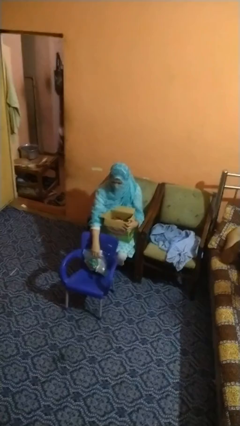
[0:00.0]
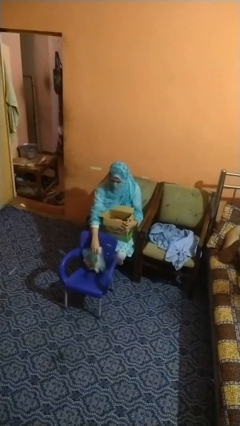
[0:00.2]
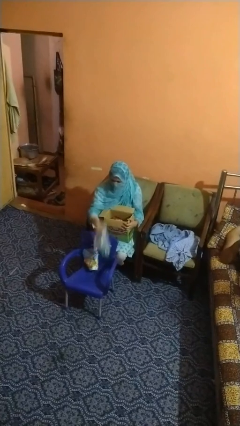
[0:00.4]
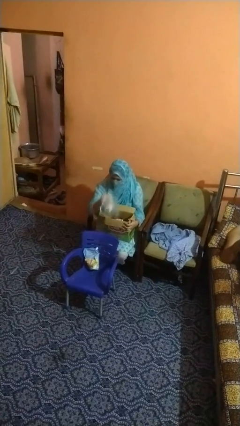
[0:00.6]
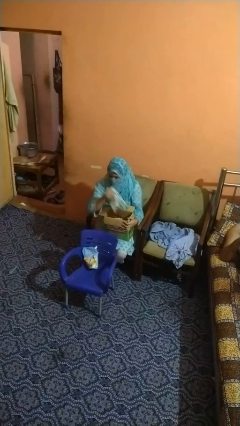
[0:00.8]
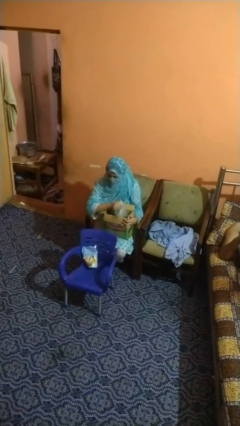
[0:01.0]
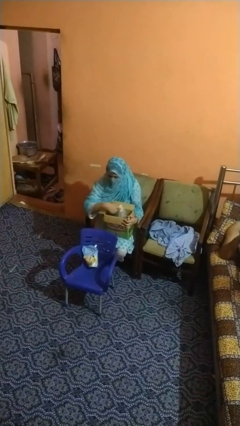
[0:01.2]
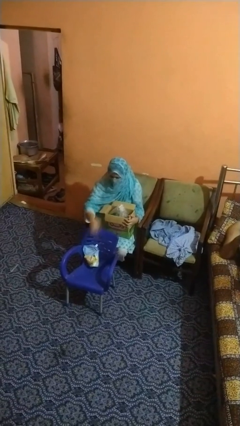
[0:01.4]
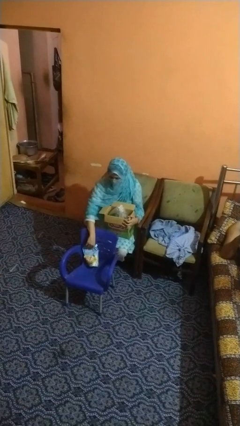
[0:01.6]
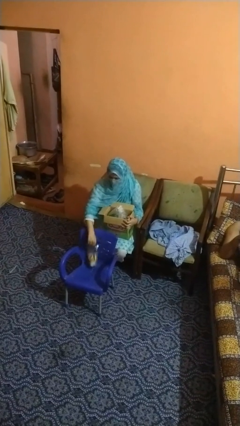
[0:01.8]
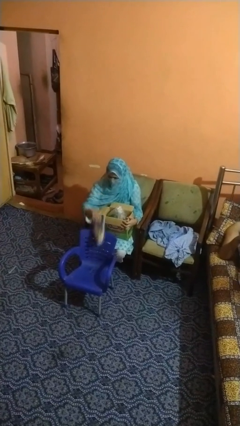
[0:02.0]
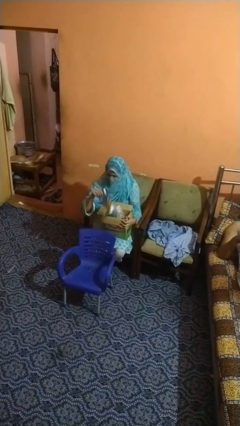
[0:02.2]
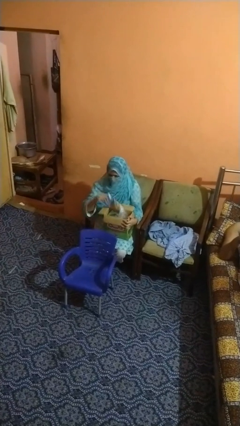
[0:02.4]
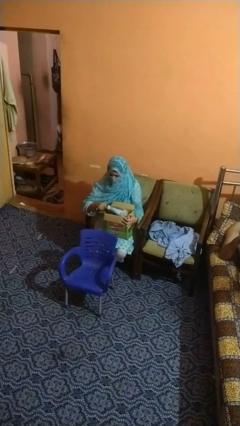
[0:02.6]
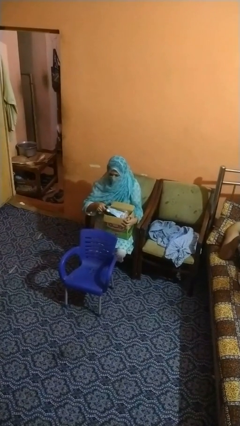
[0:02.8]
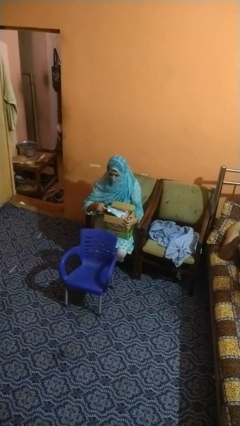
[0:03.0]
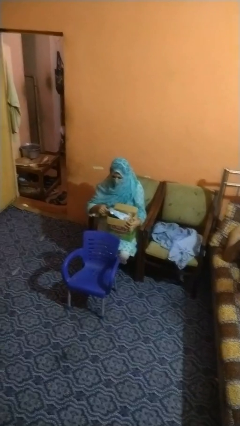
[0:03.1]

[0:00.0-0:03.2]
person puts object into box

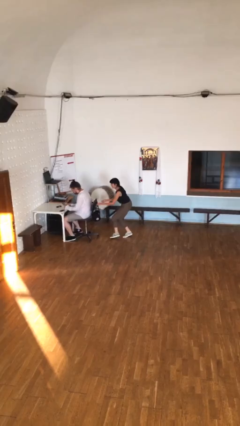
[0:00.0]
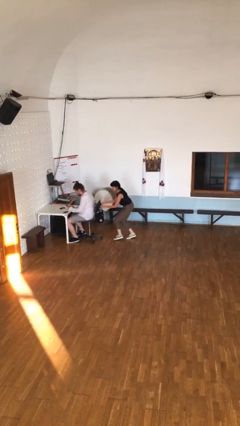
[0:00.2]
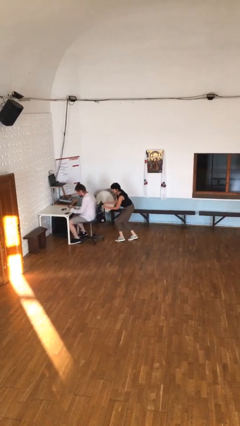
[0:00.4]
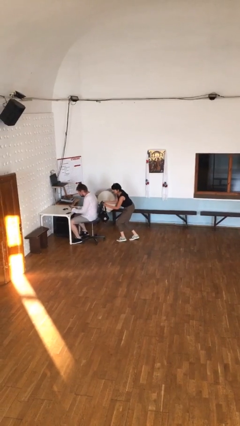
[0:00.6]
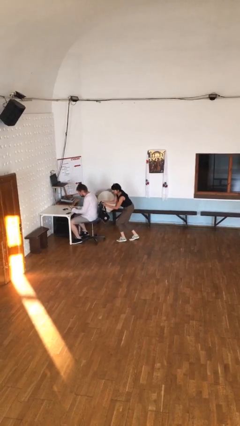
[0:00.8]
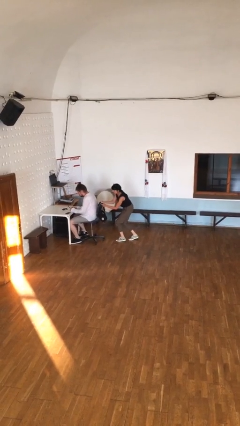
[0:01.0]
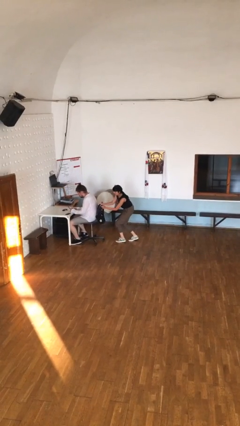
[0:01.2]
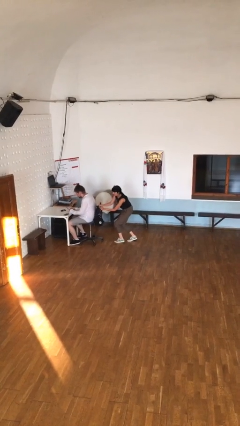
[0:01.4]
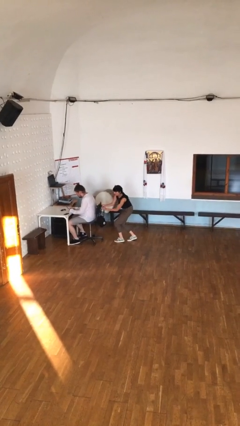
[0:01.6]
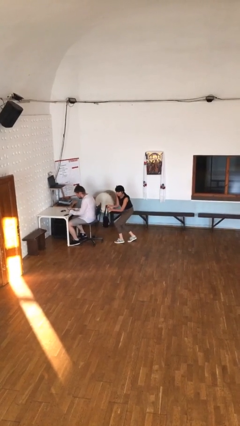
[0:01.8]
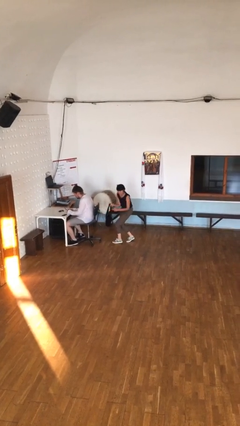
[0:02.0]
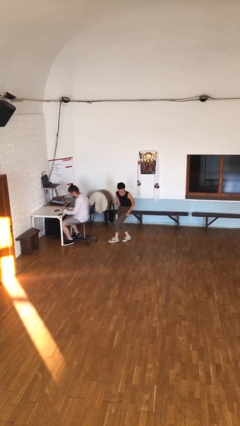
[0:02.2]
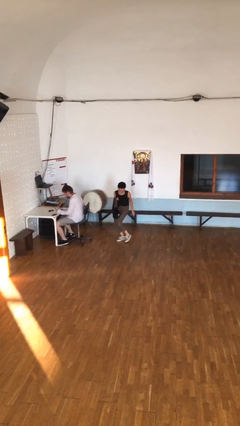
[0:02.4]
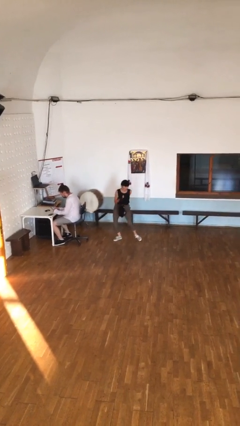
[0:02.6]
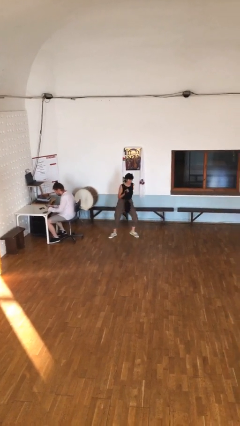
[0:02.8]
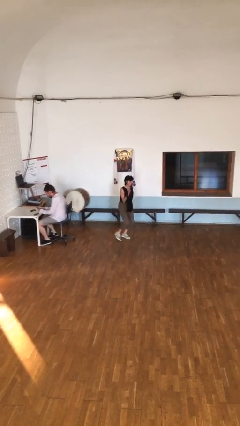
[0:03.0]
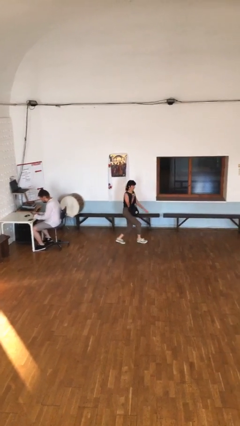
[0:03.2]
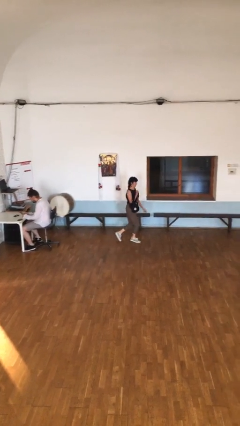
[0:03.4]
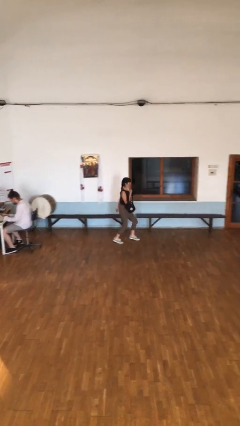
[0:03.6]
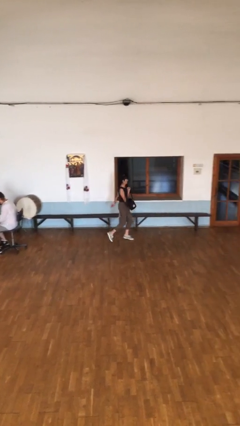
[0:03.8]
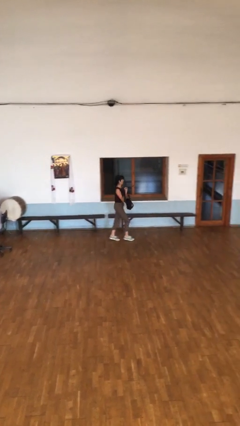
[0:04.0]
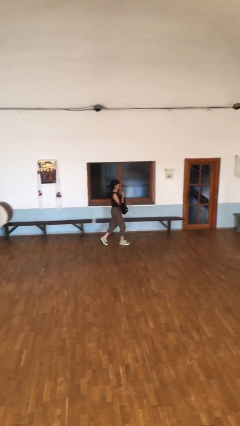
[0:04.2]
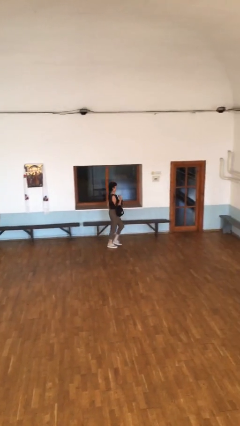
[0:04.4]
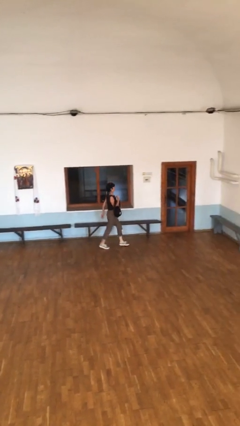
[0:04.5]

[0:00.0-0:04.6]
person steals object from person

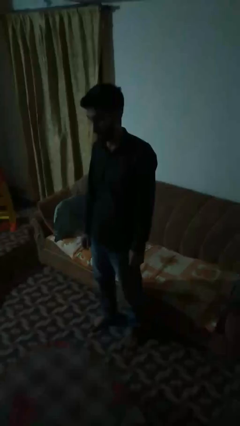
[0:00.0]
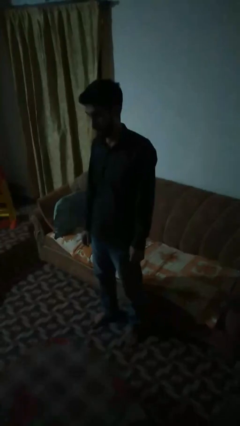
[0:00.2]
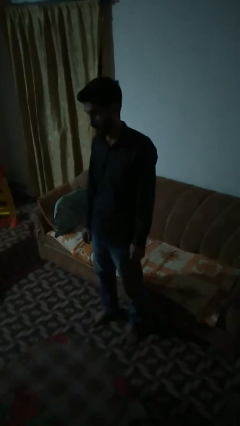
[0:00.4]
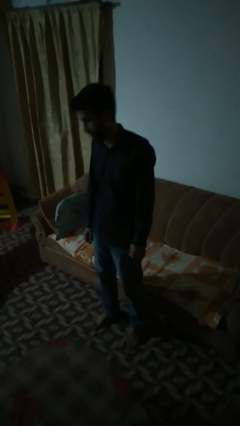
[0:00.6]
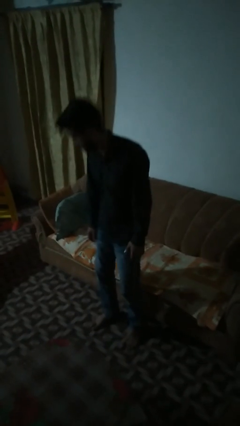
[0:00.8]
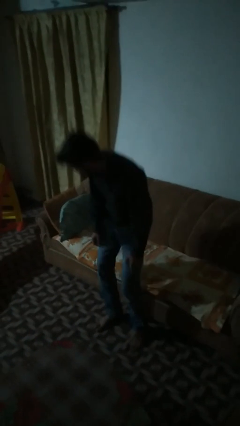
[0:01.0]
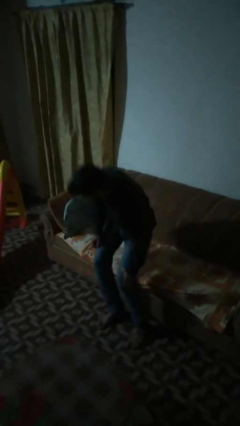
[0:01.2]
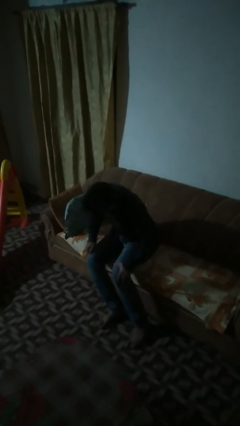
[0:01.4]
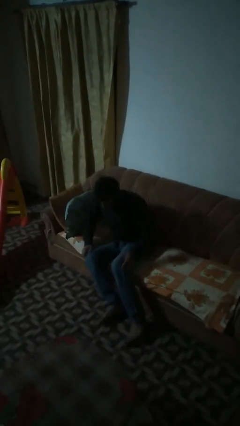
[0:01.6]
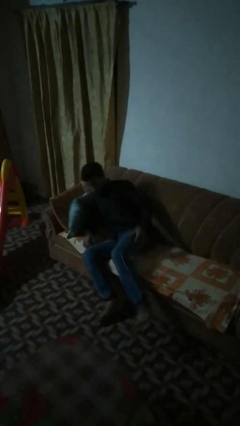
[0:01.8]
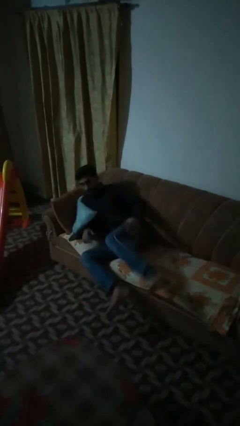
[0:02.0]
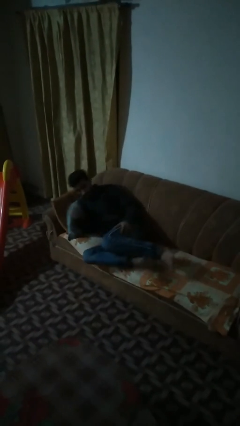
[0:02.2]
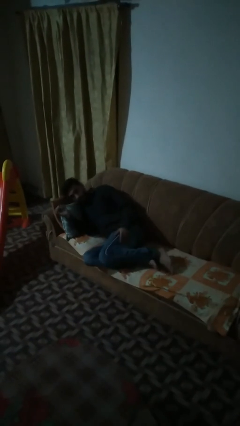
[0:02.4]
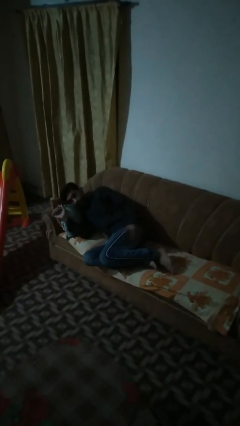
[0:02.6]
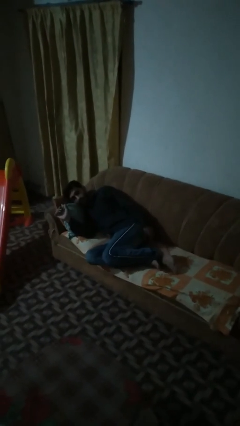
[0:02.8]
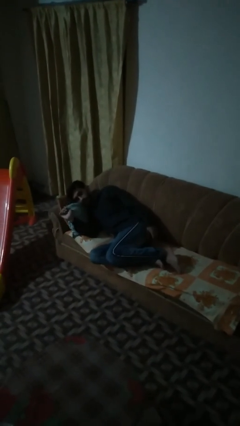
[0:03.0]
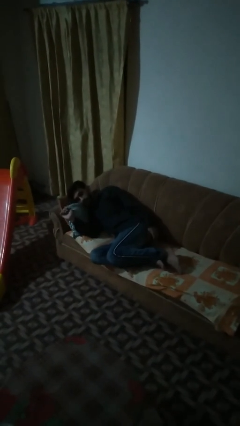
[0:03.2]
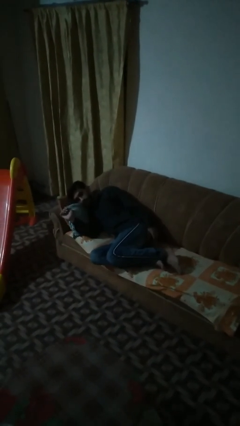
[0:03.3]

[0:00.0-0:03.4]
person lies down on couch

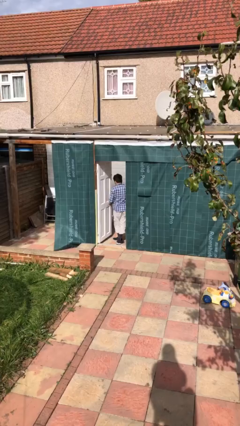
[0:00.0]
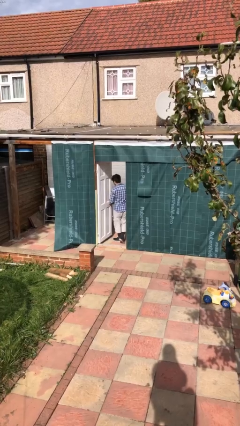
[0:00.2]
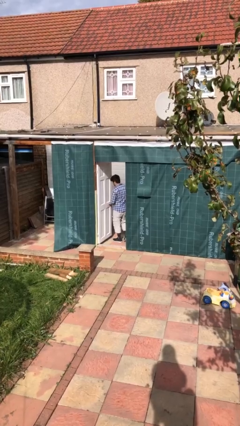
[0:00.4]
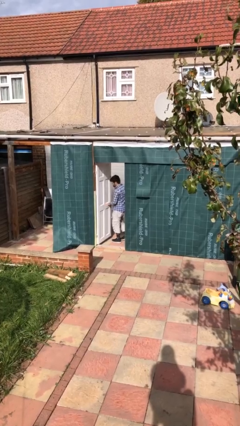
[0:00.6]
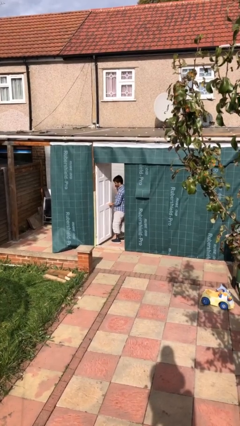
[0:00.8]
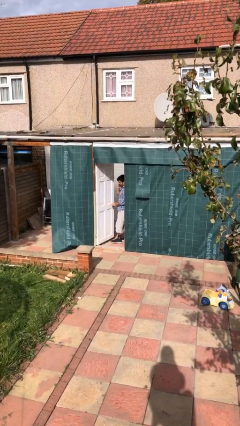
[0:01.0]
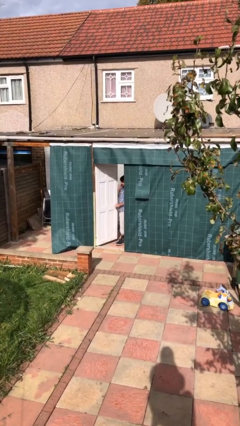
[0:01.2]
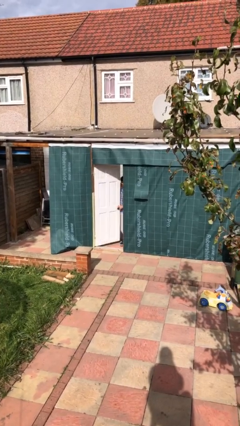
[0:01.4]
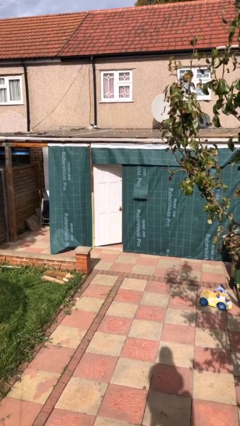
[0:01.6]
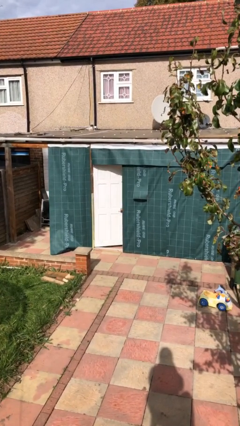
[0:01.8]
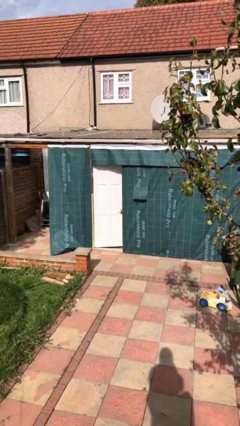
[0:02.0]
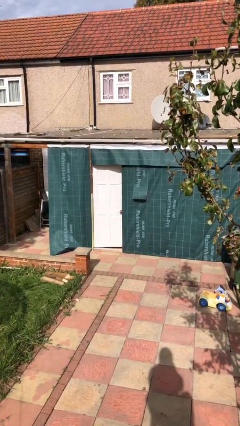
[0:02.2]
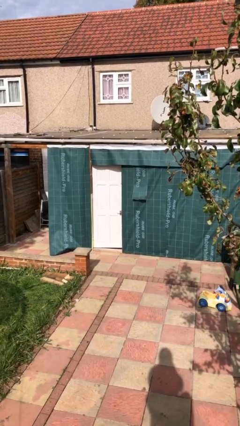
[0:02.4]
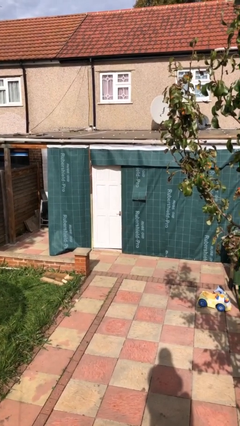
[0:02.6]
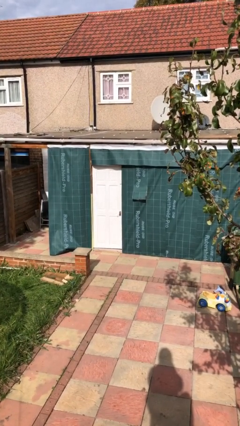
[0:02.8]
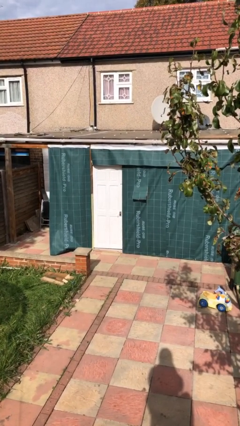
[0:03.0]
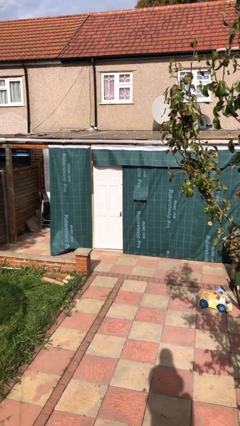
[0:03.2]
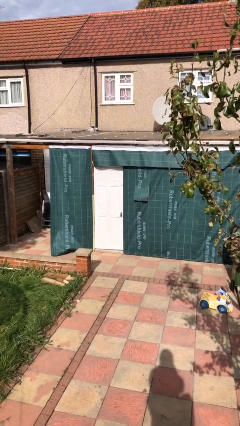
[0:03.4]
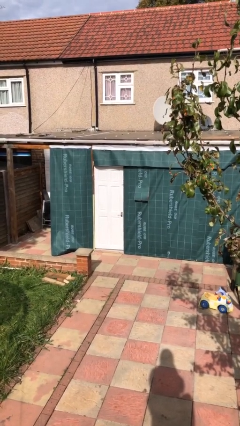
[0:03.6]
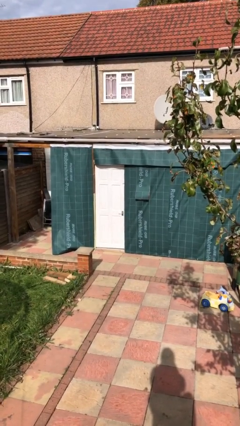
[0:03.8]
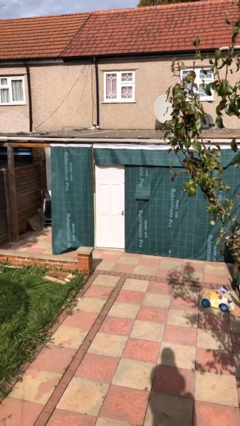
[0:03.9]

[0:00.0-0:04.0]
person closes facility door

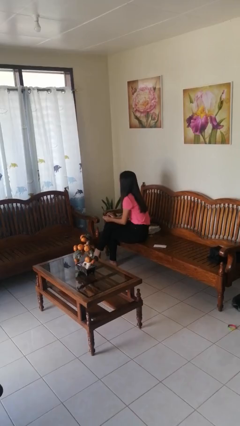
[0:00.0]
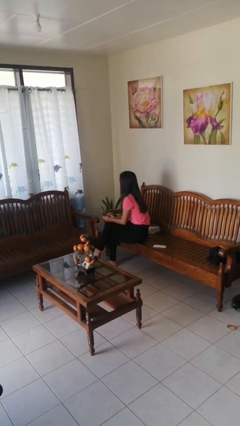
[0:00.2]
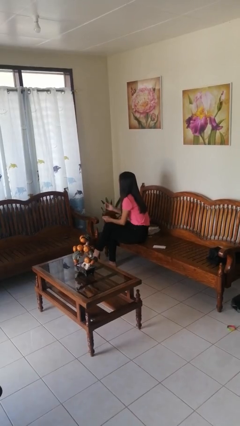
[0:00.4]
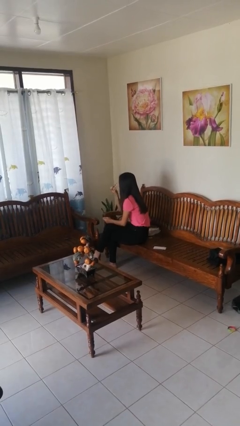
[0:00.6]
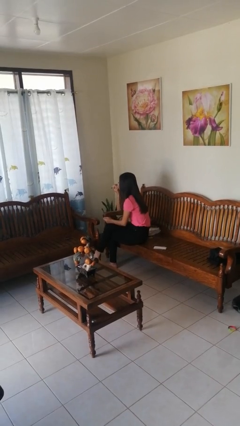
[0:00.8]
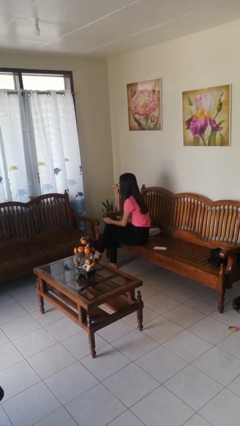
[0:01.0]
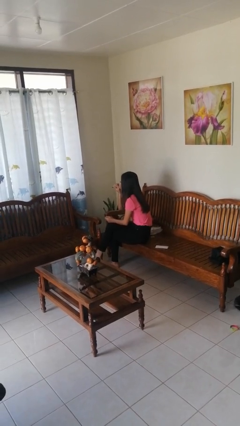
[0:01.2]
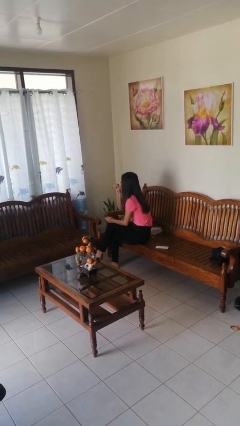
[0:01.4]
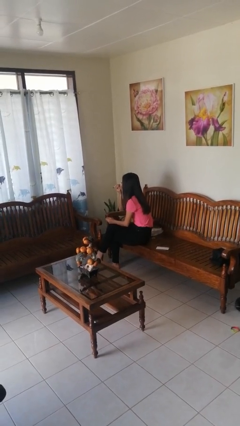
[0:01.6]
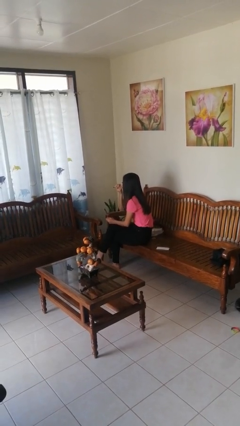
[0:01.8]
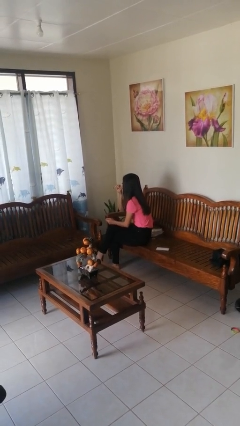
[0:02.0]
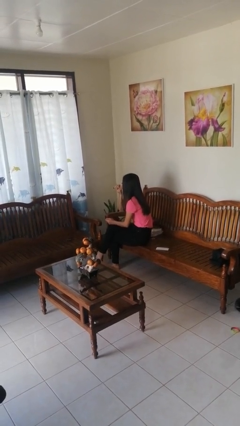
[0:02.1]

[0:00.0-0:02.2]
person applies eye makeup

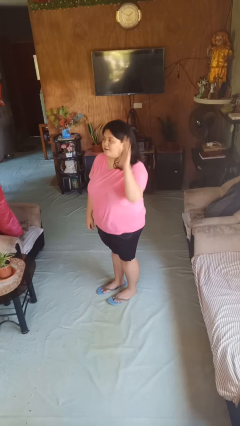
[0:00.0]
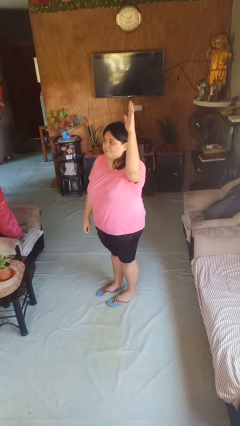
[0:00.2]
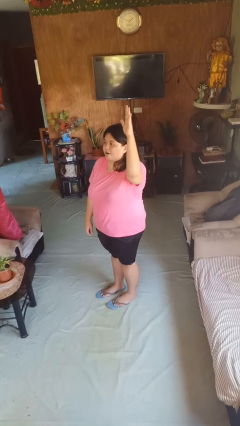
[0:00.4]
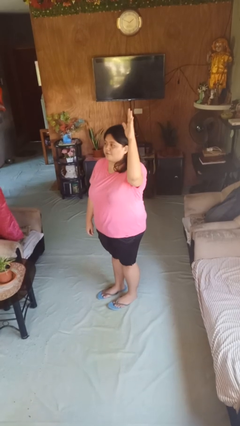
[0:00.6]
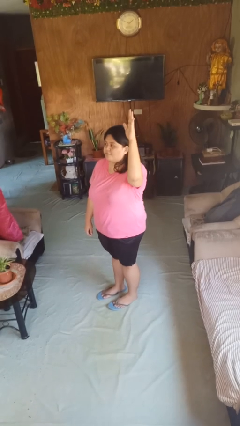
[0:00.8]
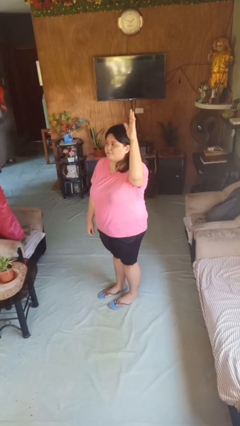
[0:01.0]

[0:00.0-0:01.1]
person gestures raise hand
